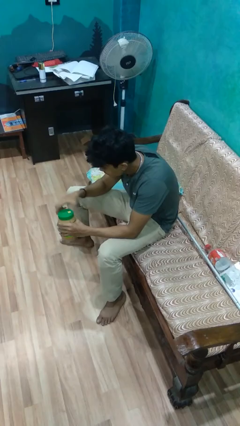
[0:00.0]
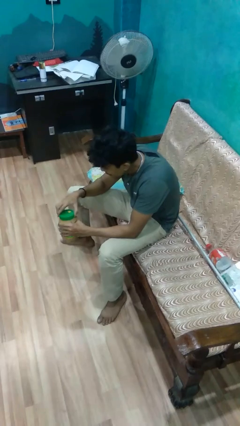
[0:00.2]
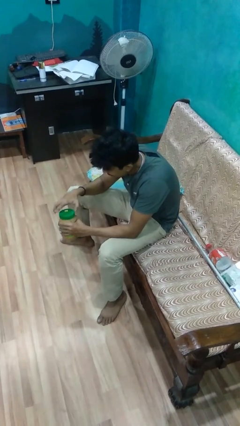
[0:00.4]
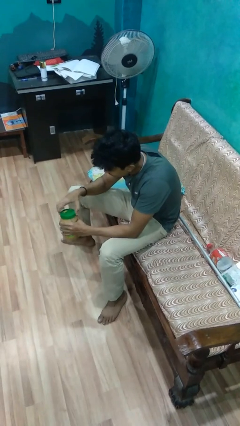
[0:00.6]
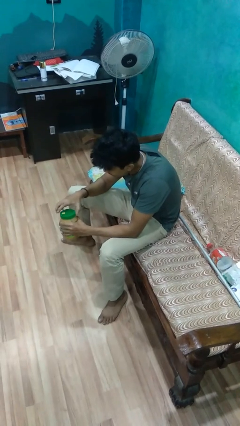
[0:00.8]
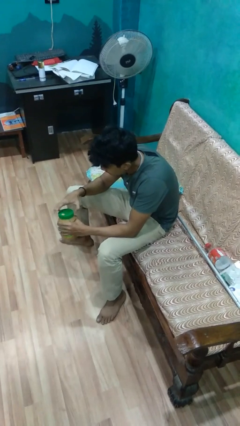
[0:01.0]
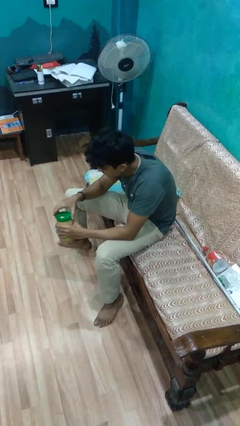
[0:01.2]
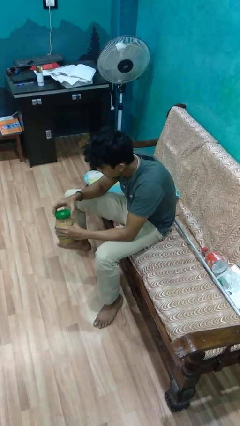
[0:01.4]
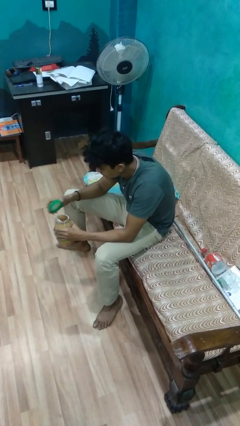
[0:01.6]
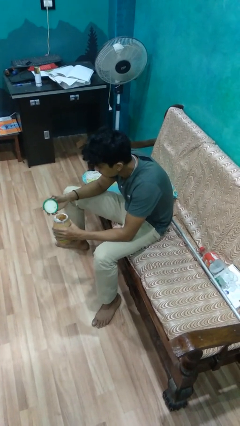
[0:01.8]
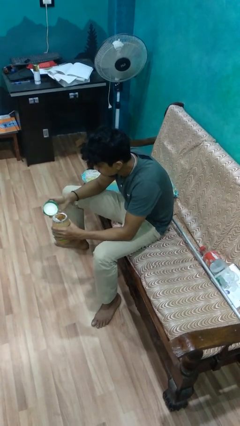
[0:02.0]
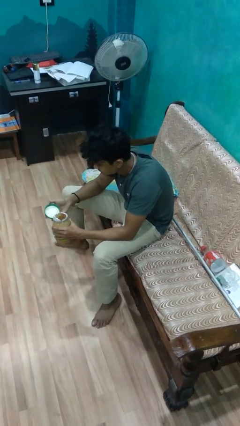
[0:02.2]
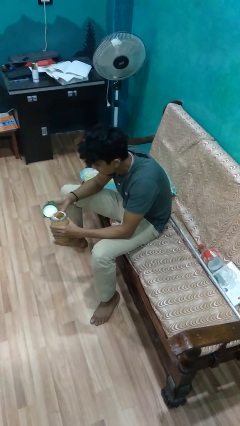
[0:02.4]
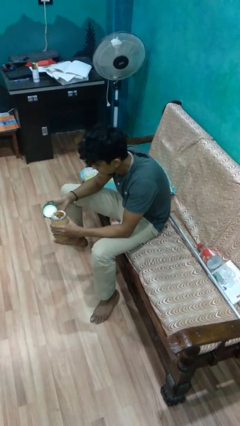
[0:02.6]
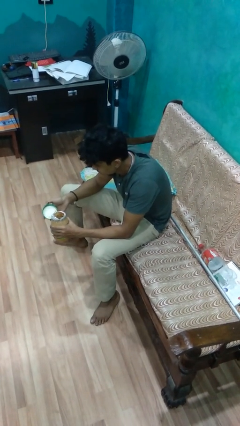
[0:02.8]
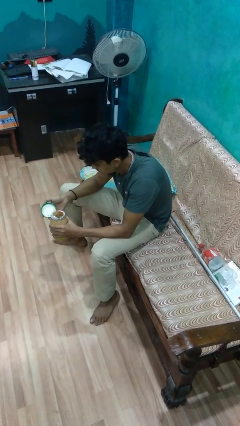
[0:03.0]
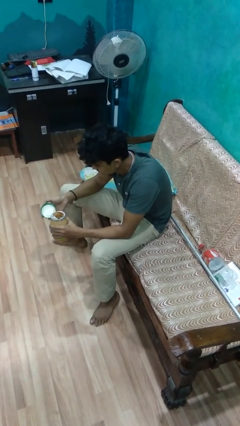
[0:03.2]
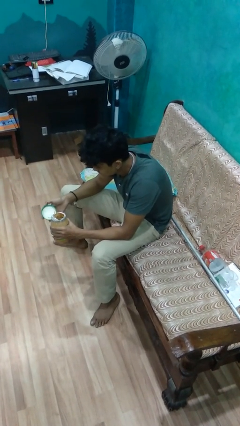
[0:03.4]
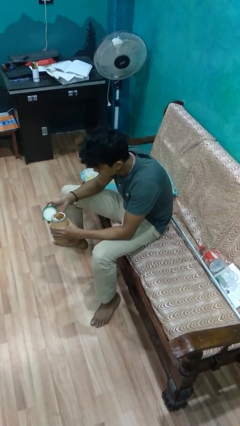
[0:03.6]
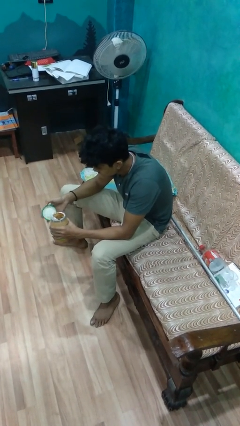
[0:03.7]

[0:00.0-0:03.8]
person opens jar

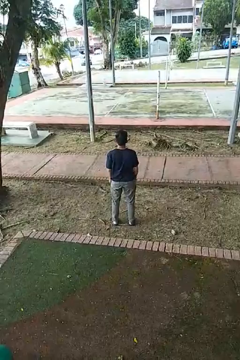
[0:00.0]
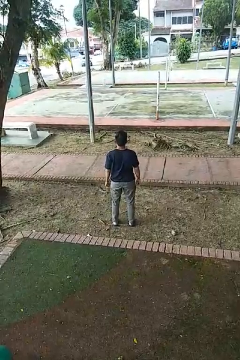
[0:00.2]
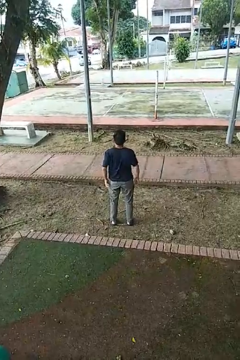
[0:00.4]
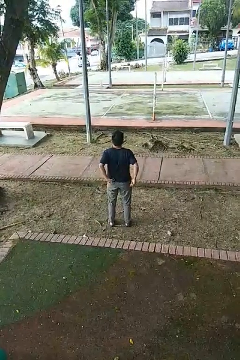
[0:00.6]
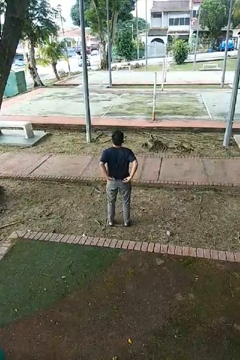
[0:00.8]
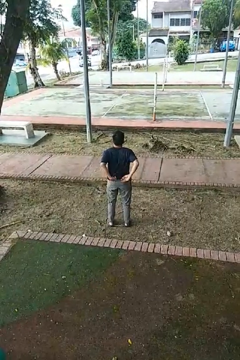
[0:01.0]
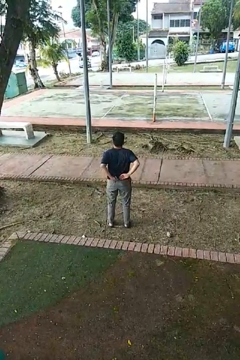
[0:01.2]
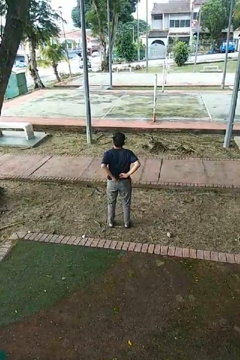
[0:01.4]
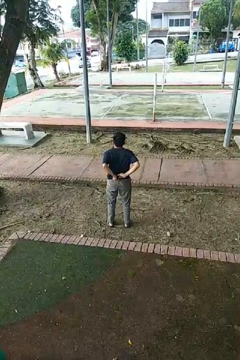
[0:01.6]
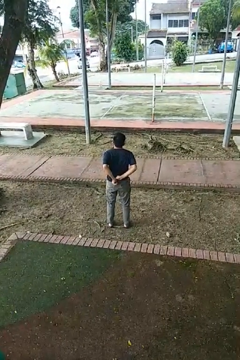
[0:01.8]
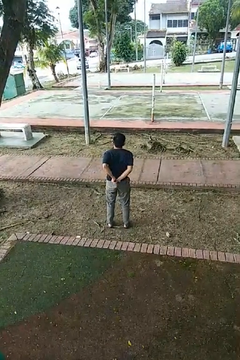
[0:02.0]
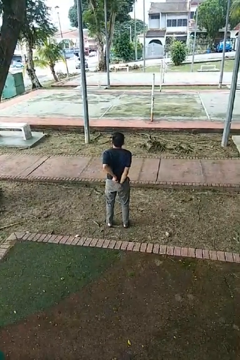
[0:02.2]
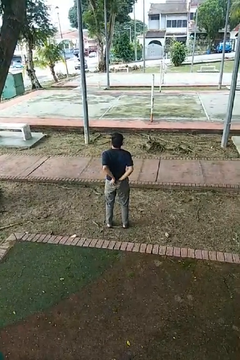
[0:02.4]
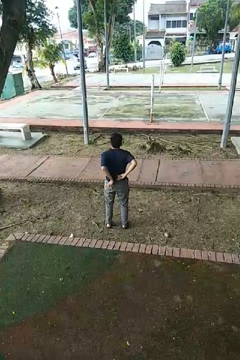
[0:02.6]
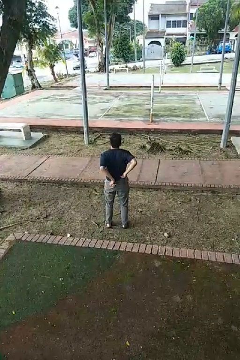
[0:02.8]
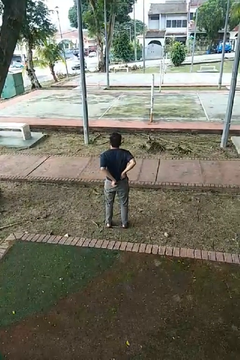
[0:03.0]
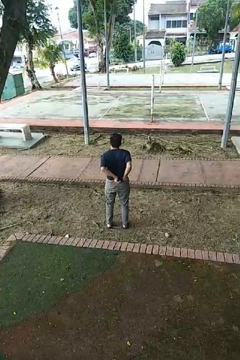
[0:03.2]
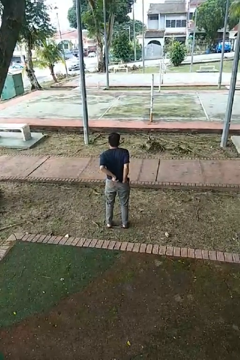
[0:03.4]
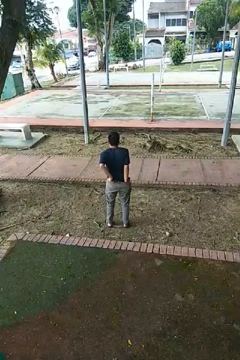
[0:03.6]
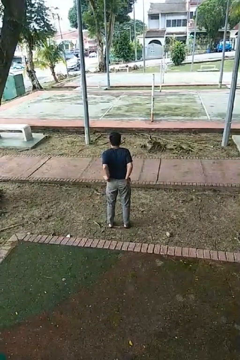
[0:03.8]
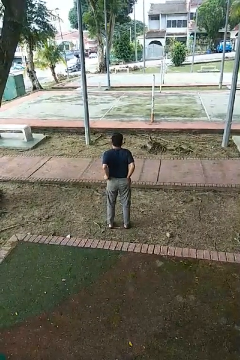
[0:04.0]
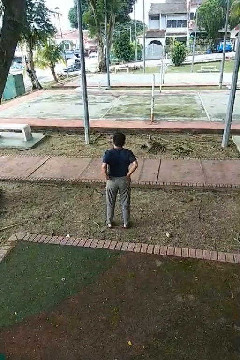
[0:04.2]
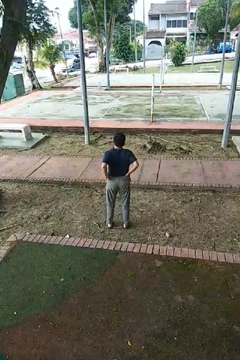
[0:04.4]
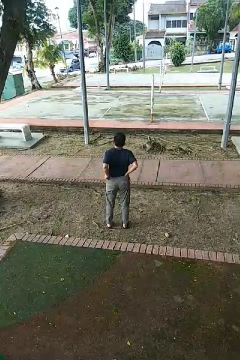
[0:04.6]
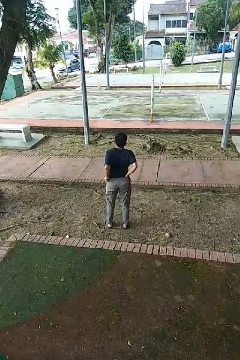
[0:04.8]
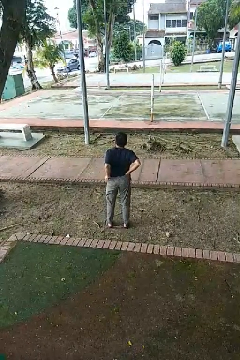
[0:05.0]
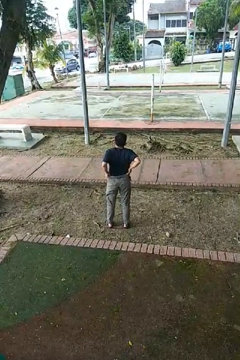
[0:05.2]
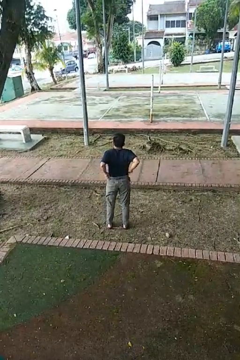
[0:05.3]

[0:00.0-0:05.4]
person tucks in shirt

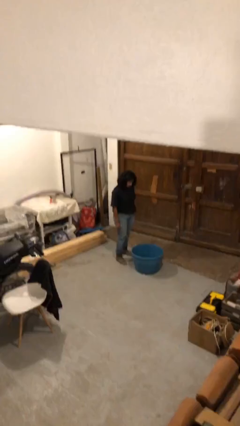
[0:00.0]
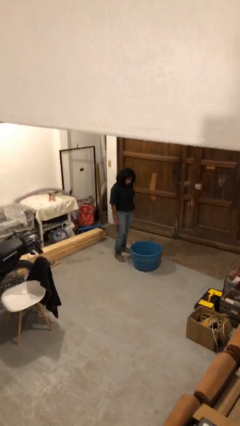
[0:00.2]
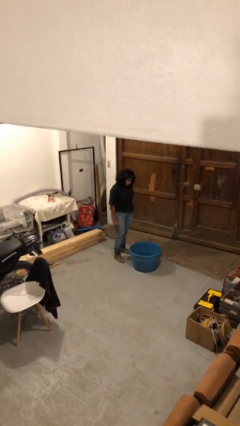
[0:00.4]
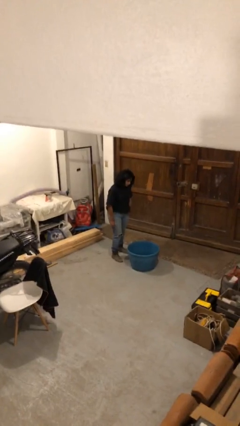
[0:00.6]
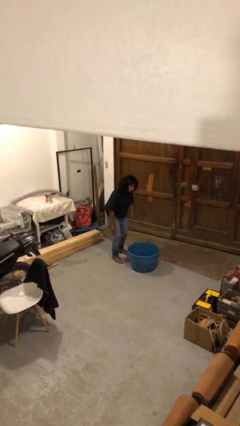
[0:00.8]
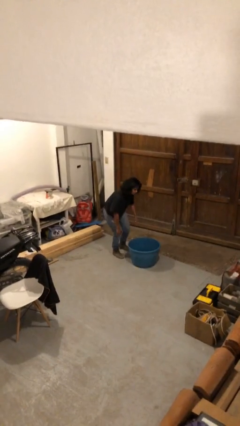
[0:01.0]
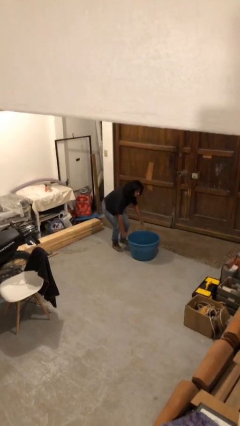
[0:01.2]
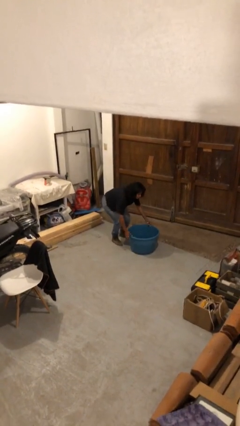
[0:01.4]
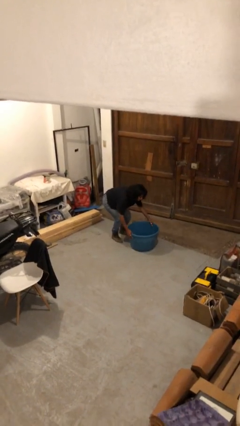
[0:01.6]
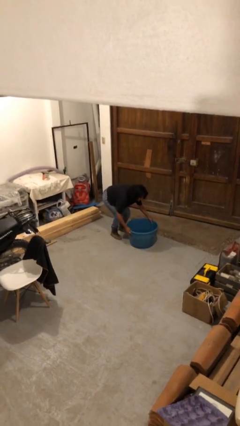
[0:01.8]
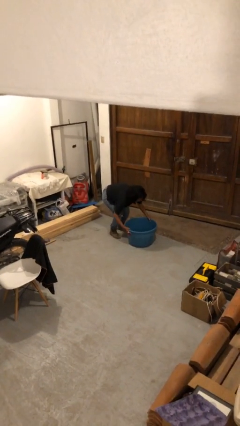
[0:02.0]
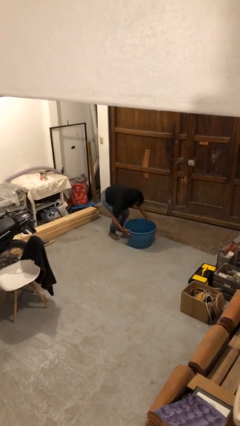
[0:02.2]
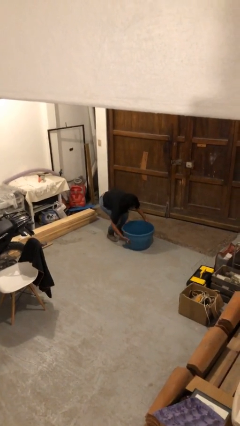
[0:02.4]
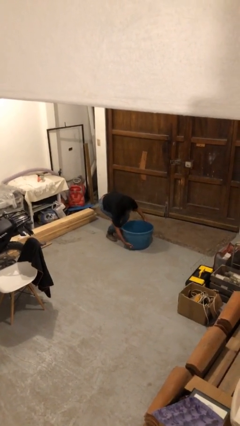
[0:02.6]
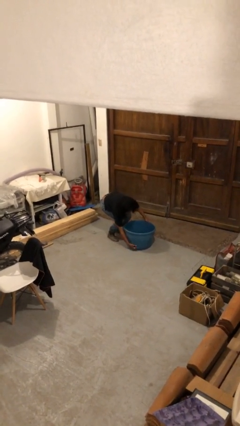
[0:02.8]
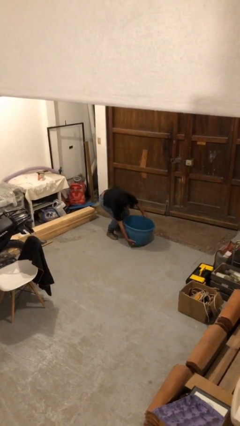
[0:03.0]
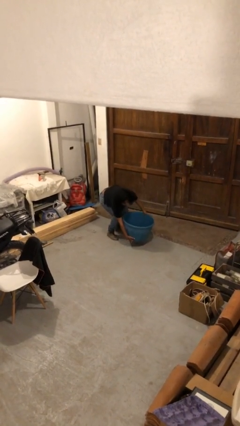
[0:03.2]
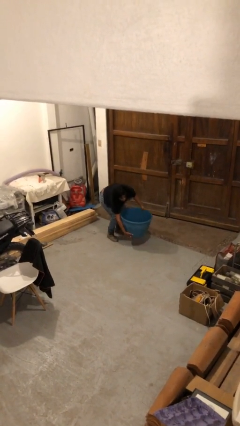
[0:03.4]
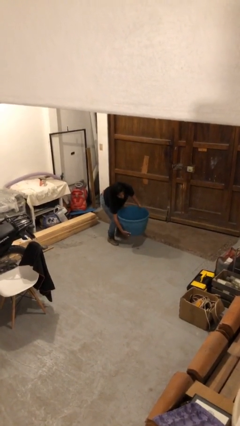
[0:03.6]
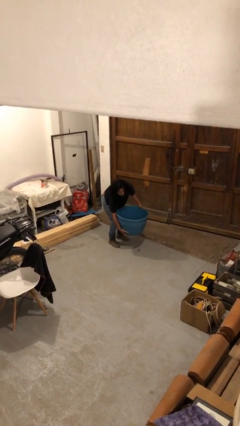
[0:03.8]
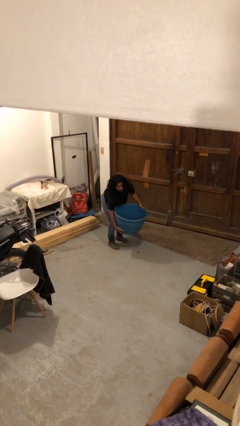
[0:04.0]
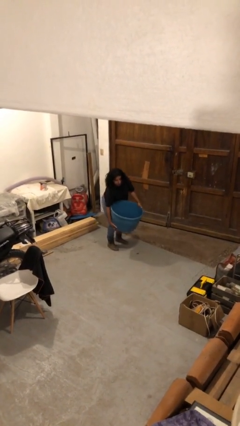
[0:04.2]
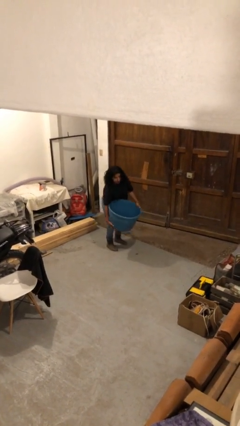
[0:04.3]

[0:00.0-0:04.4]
person picks up object from floor

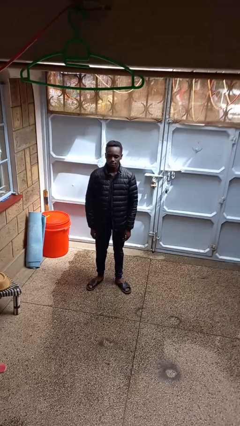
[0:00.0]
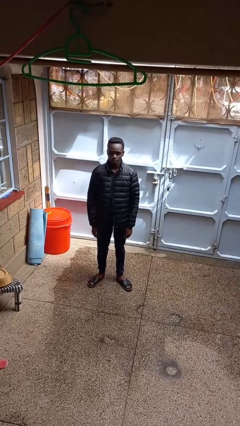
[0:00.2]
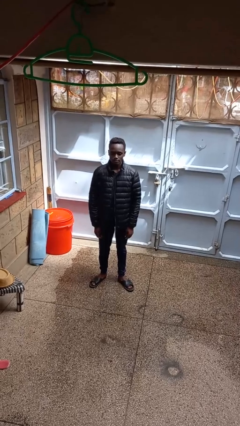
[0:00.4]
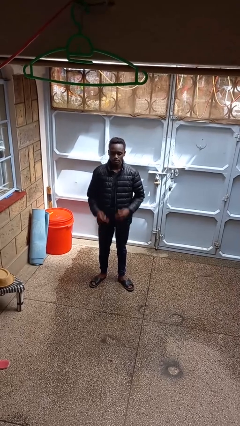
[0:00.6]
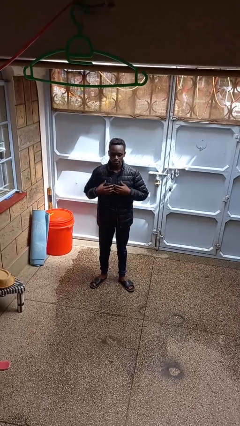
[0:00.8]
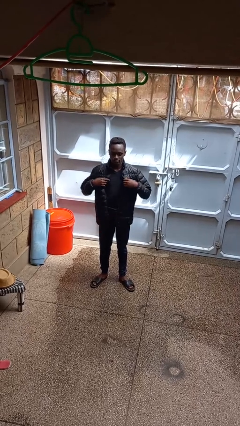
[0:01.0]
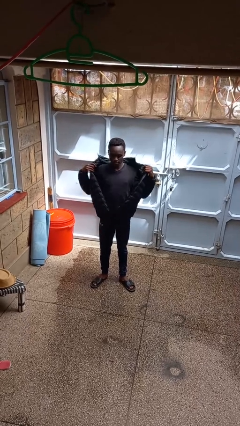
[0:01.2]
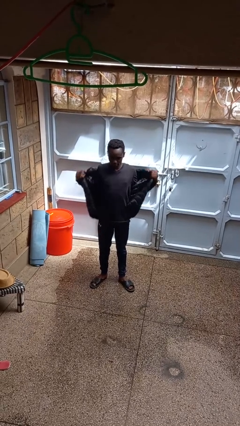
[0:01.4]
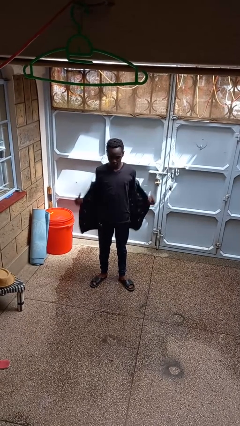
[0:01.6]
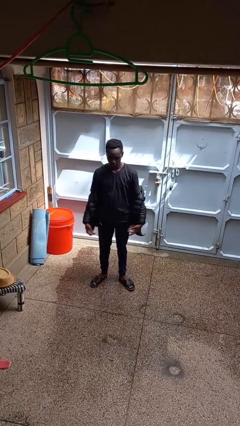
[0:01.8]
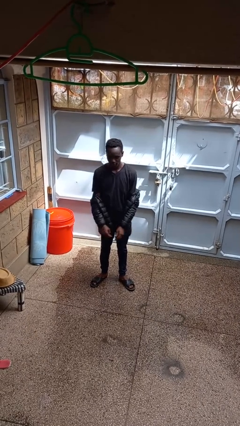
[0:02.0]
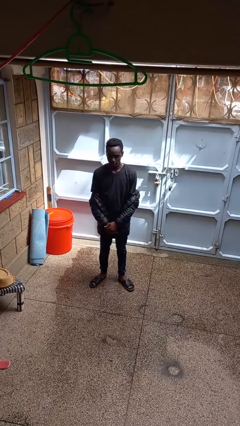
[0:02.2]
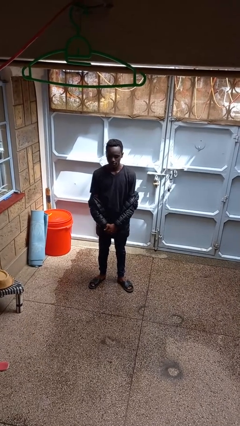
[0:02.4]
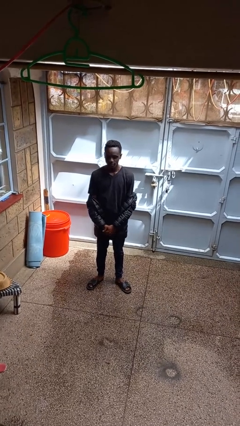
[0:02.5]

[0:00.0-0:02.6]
person takes off jacket

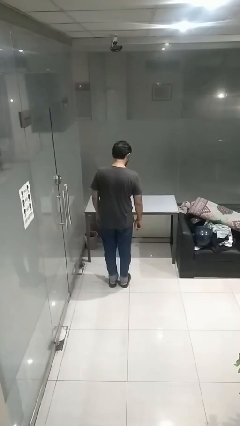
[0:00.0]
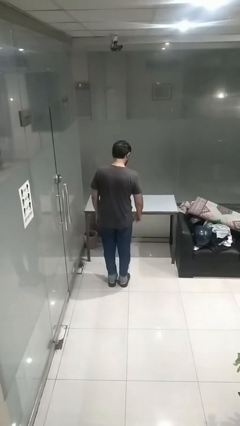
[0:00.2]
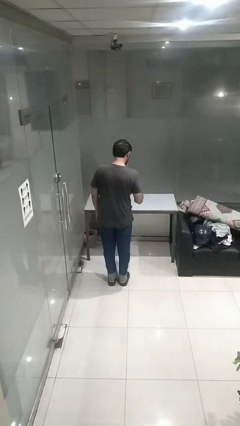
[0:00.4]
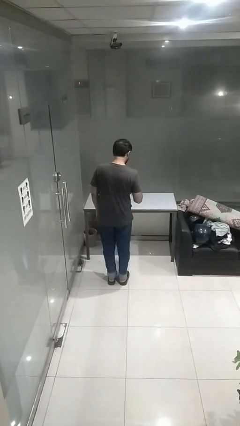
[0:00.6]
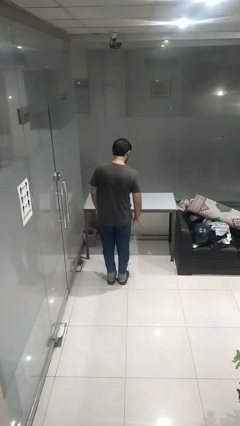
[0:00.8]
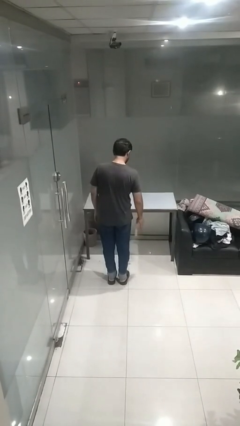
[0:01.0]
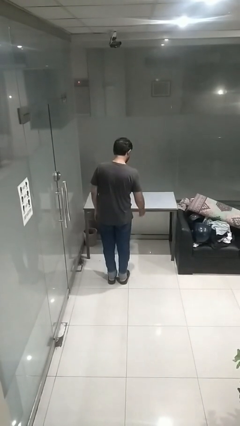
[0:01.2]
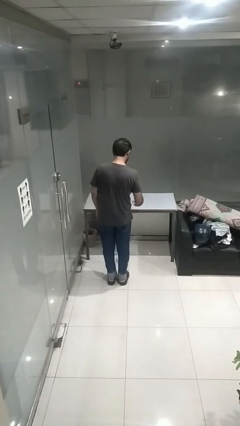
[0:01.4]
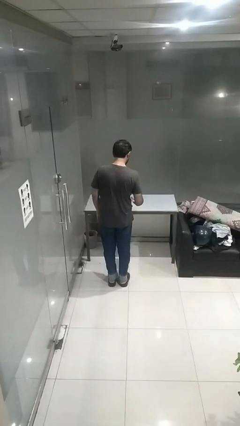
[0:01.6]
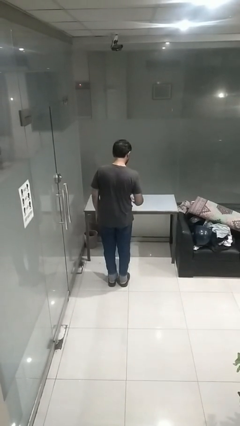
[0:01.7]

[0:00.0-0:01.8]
person bounces ball on floor

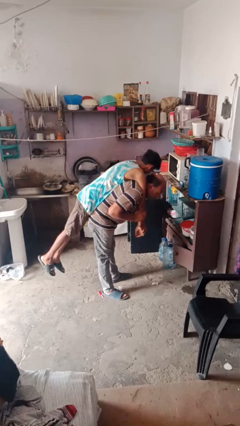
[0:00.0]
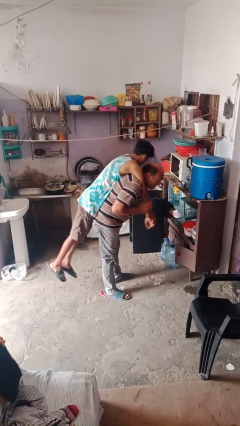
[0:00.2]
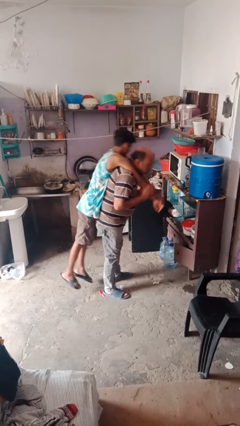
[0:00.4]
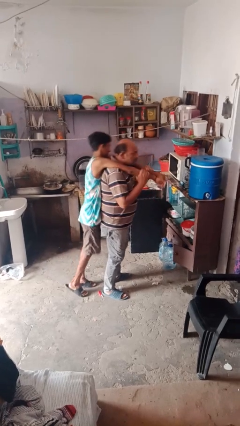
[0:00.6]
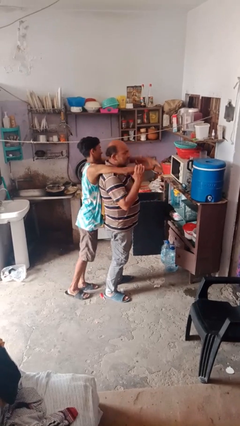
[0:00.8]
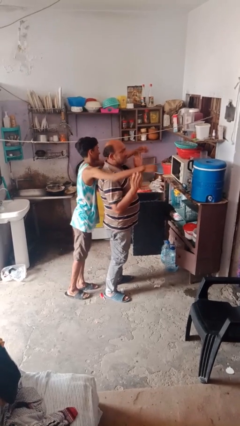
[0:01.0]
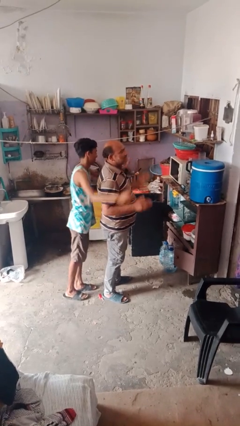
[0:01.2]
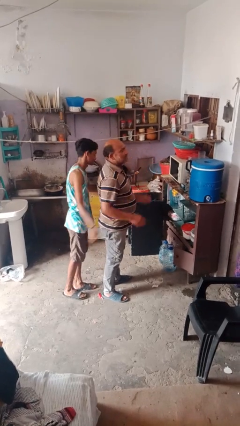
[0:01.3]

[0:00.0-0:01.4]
person puts down person
